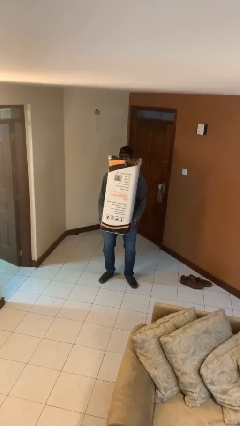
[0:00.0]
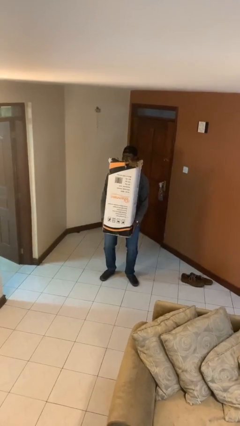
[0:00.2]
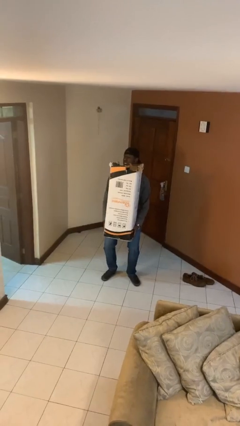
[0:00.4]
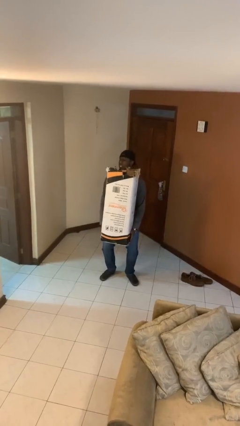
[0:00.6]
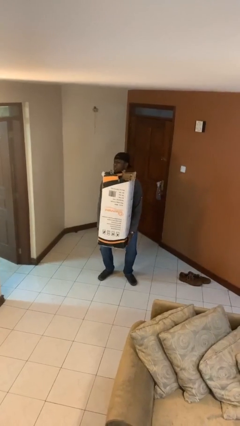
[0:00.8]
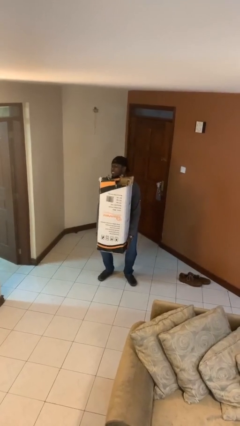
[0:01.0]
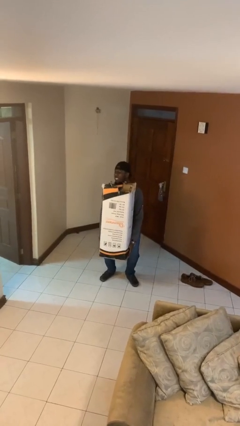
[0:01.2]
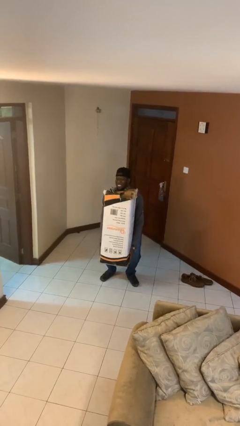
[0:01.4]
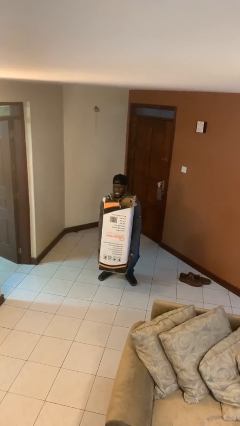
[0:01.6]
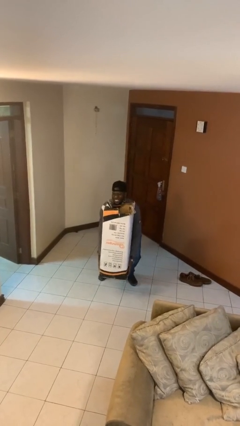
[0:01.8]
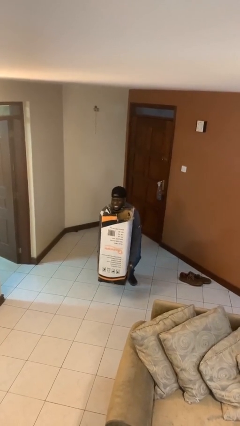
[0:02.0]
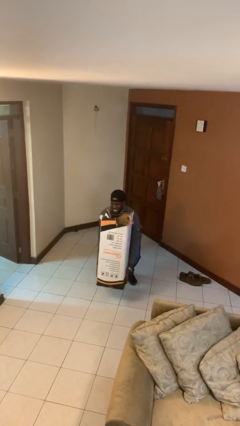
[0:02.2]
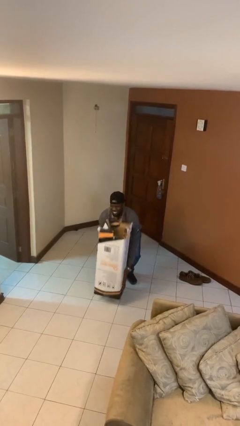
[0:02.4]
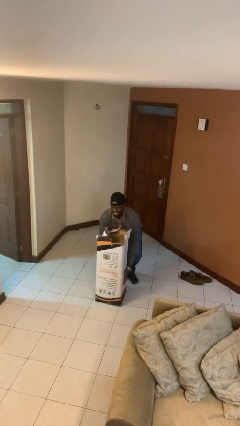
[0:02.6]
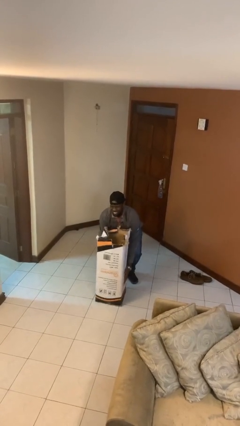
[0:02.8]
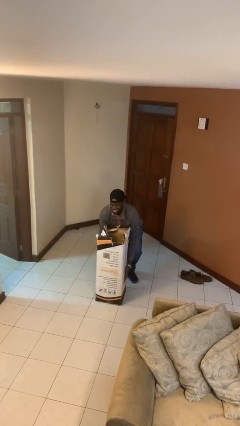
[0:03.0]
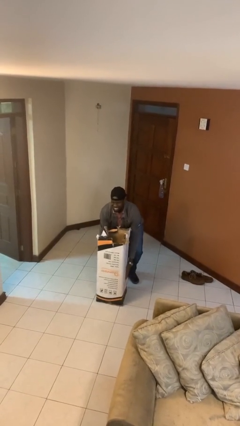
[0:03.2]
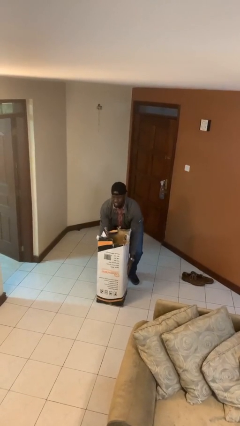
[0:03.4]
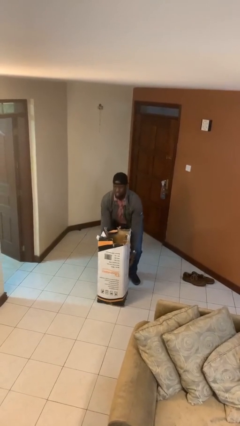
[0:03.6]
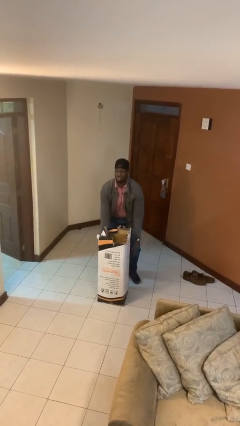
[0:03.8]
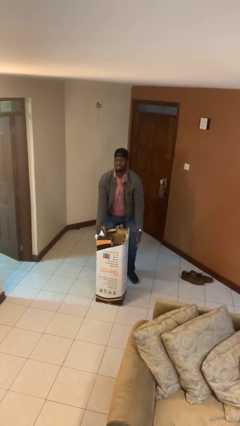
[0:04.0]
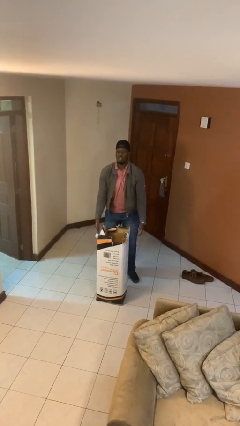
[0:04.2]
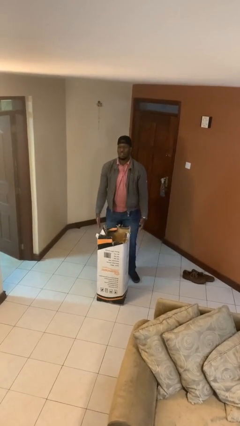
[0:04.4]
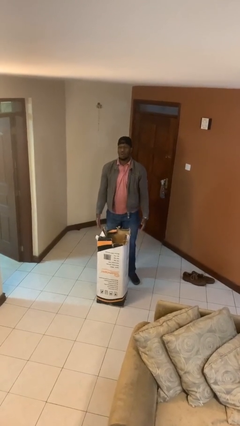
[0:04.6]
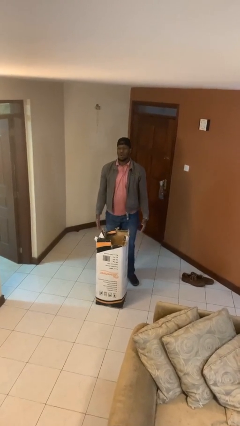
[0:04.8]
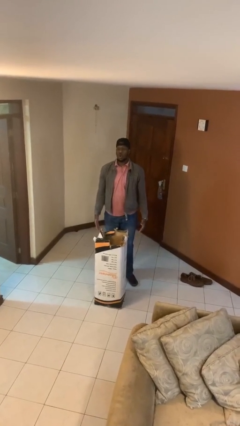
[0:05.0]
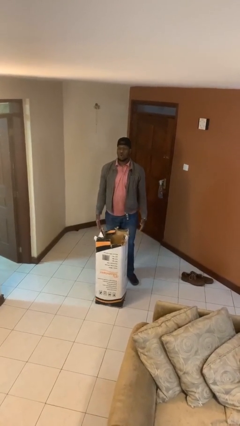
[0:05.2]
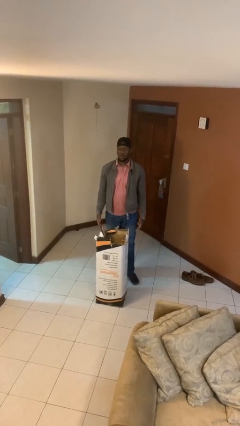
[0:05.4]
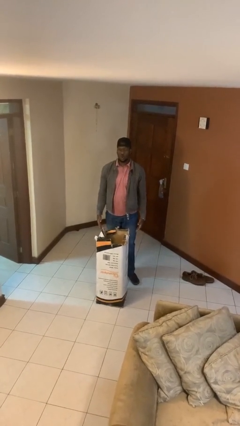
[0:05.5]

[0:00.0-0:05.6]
person puts down object on floor

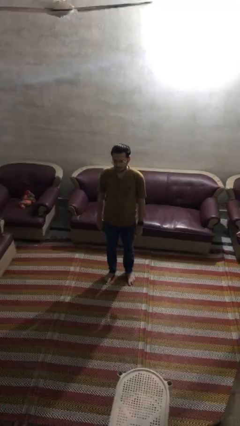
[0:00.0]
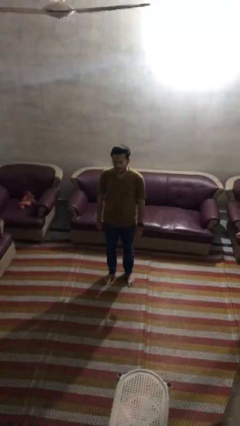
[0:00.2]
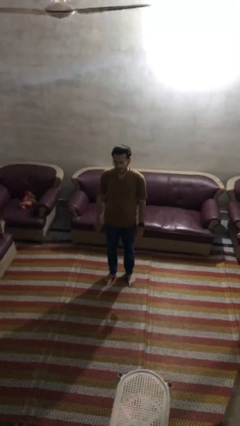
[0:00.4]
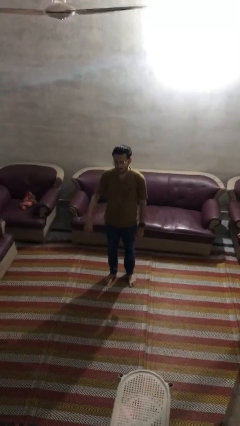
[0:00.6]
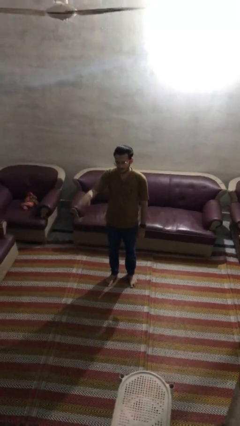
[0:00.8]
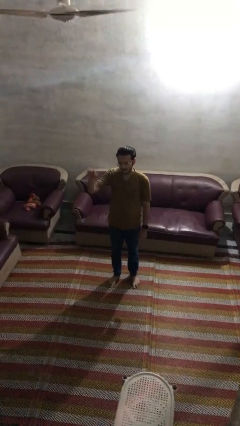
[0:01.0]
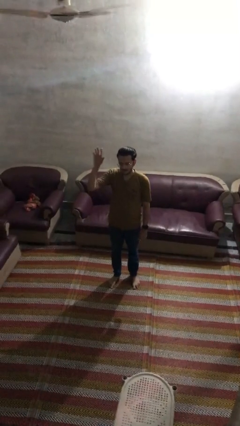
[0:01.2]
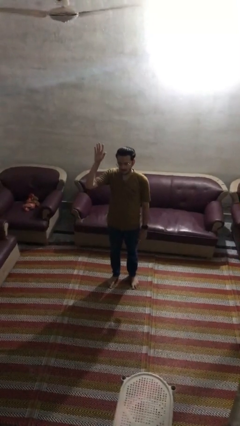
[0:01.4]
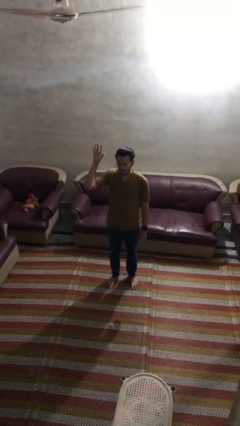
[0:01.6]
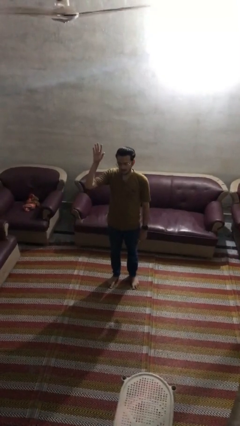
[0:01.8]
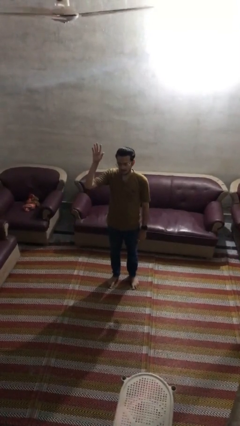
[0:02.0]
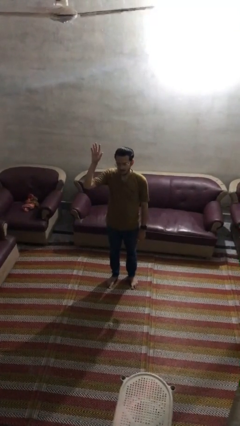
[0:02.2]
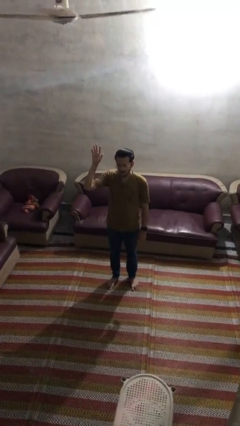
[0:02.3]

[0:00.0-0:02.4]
person gestures raise hand

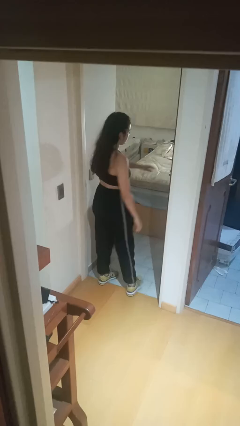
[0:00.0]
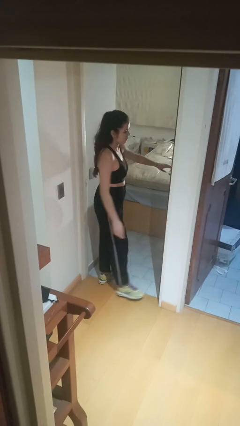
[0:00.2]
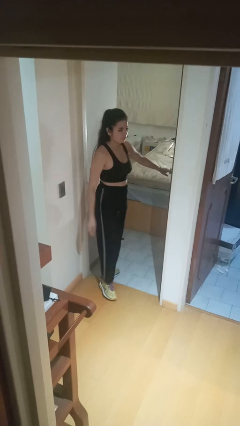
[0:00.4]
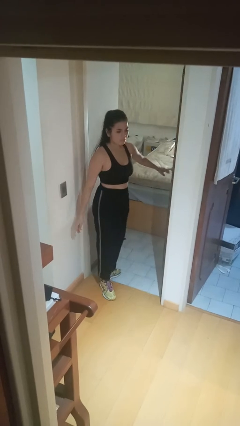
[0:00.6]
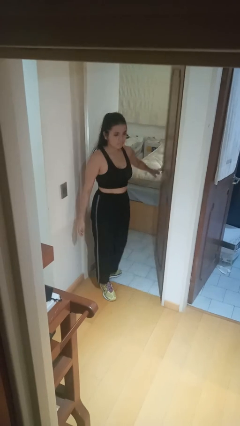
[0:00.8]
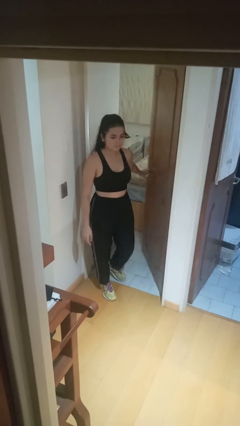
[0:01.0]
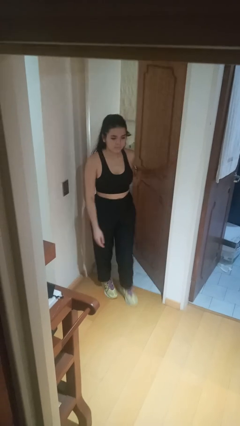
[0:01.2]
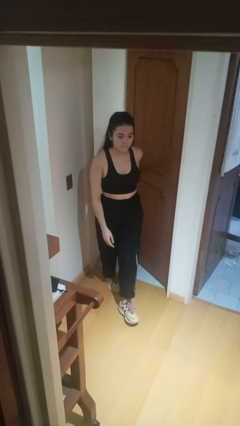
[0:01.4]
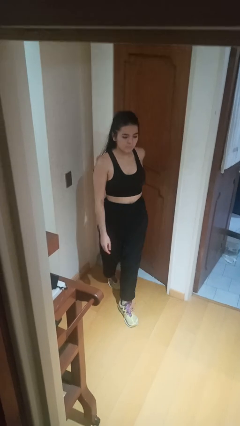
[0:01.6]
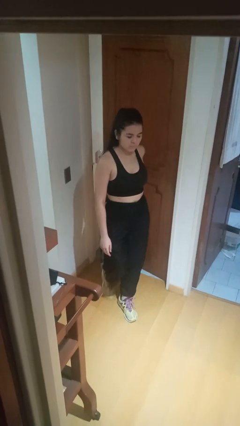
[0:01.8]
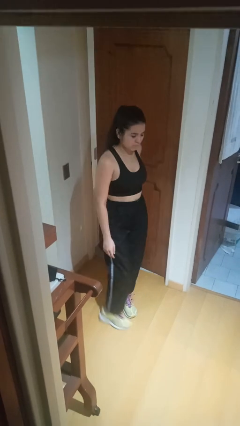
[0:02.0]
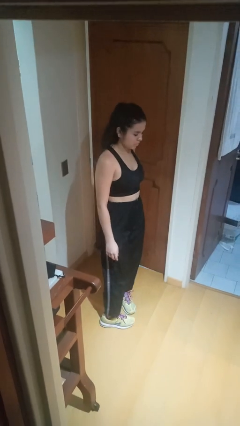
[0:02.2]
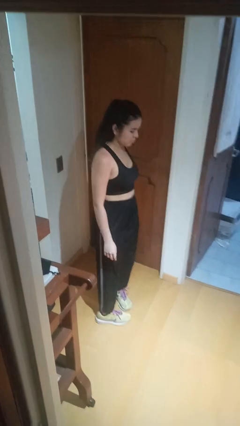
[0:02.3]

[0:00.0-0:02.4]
person closes facility door

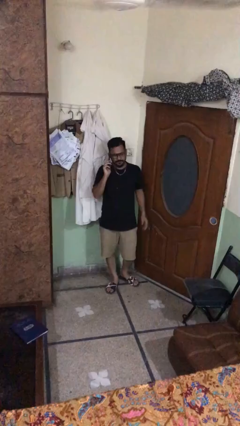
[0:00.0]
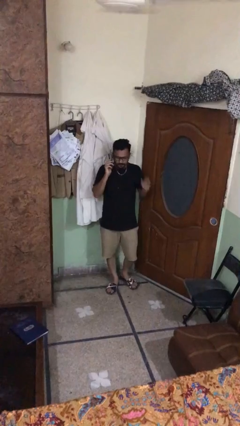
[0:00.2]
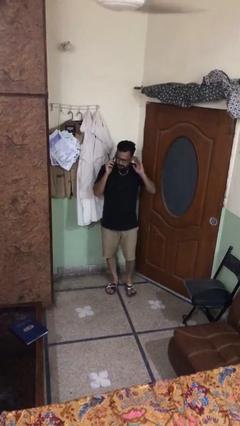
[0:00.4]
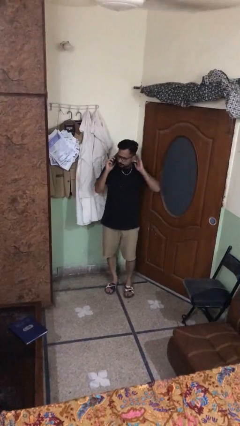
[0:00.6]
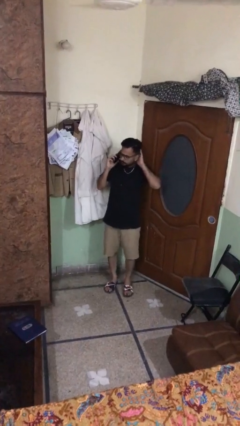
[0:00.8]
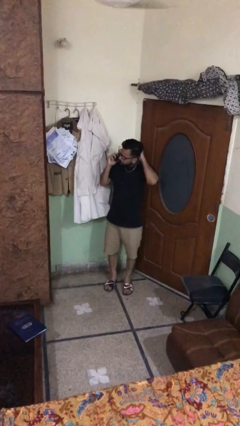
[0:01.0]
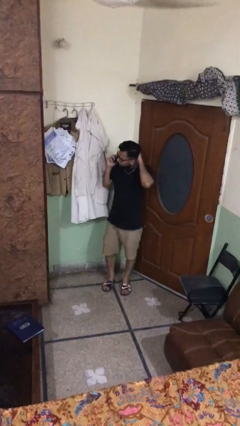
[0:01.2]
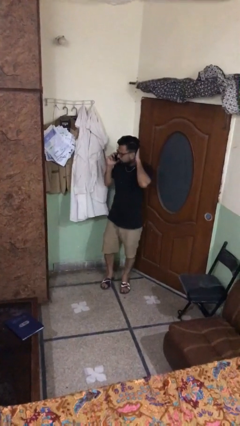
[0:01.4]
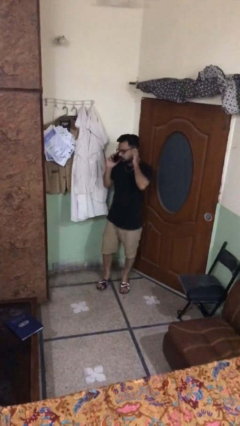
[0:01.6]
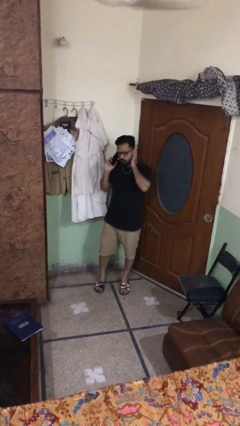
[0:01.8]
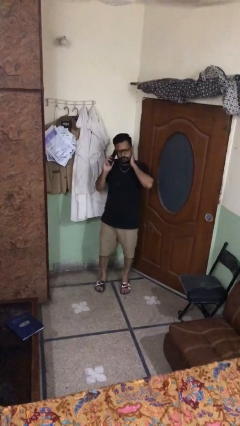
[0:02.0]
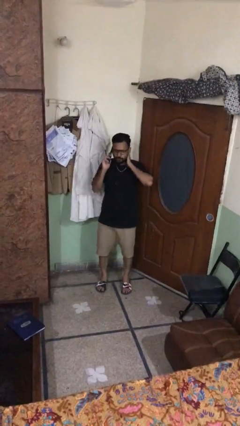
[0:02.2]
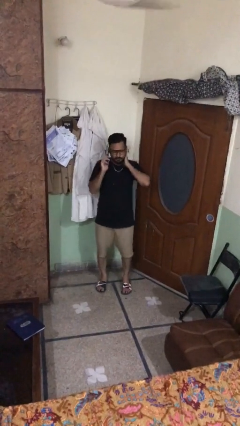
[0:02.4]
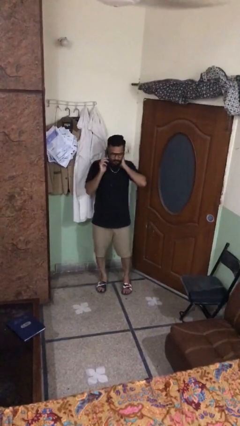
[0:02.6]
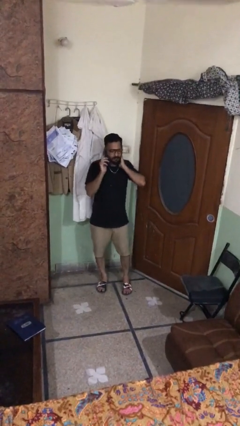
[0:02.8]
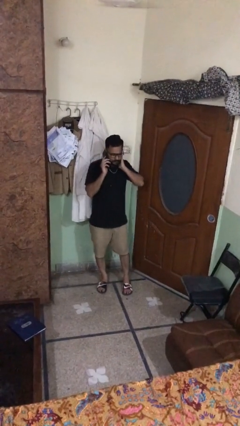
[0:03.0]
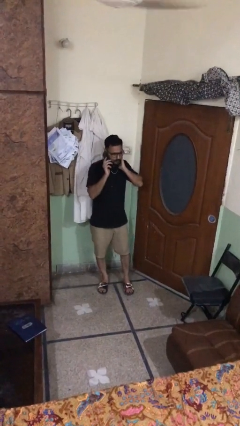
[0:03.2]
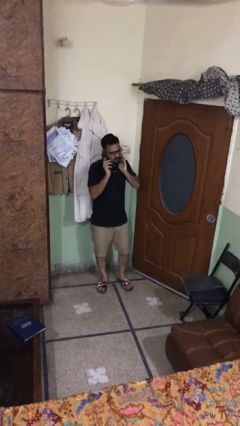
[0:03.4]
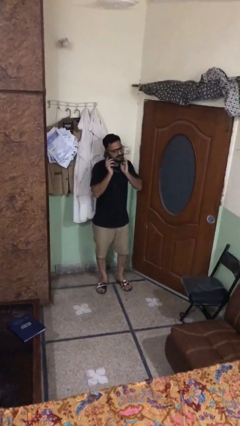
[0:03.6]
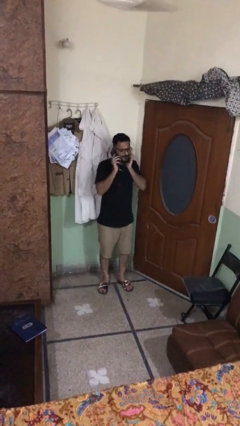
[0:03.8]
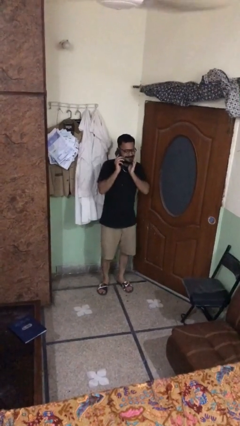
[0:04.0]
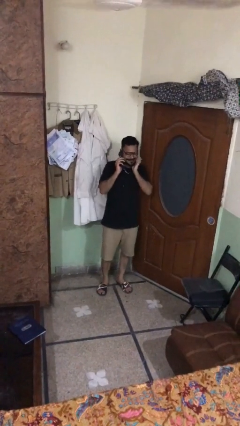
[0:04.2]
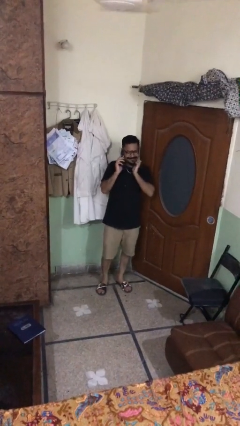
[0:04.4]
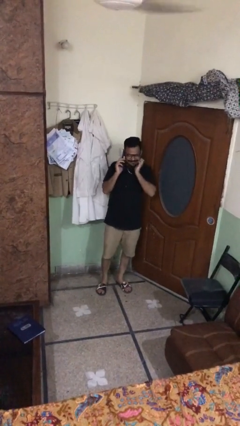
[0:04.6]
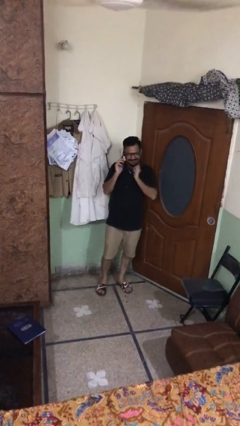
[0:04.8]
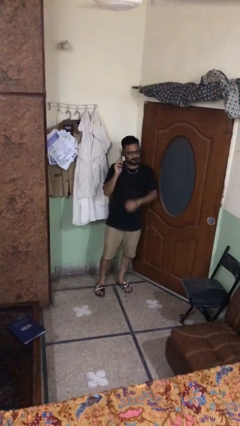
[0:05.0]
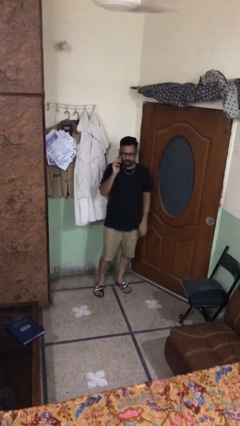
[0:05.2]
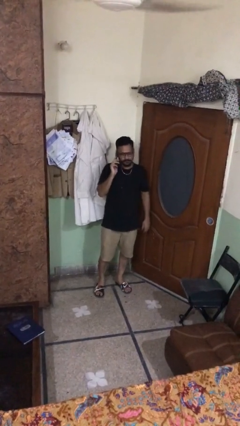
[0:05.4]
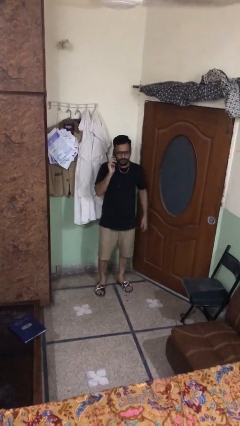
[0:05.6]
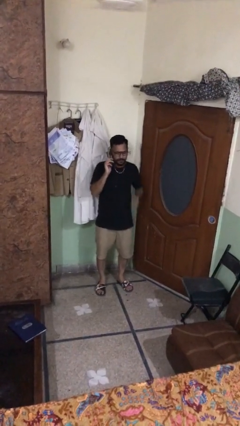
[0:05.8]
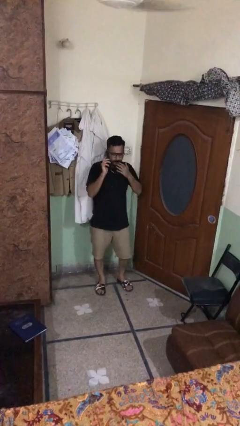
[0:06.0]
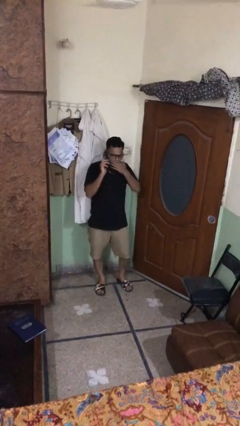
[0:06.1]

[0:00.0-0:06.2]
person talks on phone

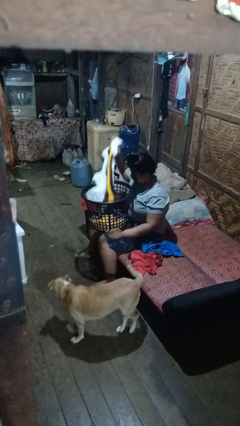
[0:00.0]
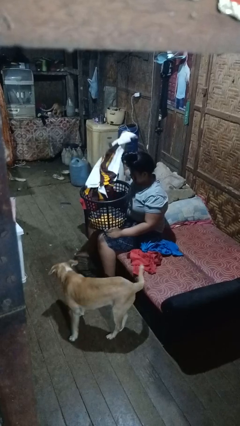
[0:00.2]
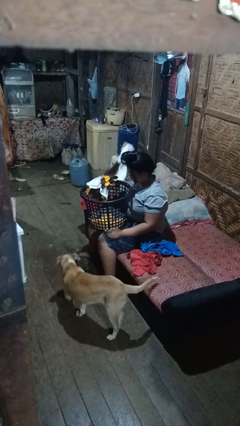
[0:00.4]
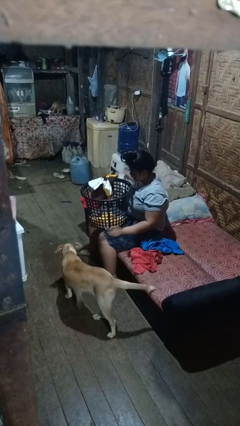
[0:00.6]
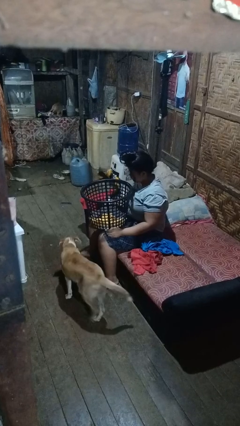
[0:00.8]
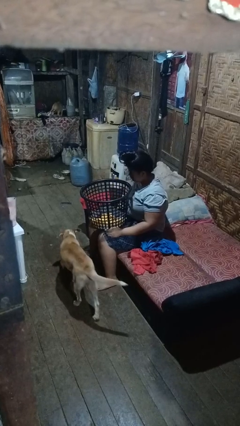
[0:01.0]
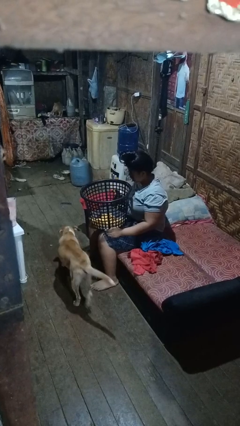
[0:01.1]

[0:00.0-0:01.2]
person takes object from basket
